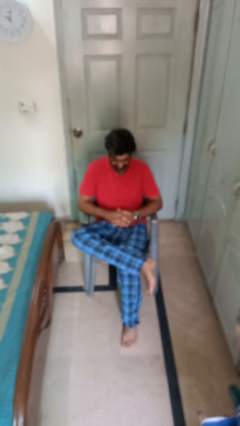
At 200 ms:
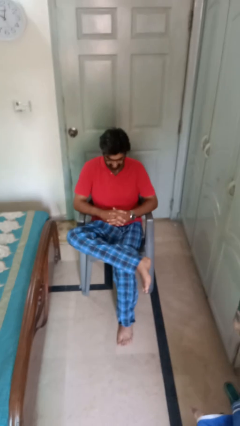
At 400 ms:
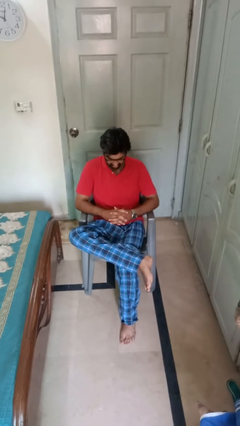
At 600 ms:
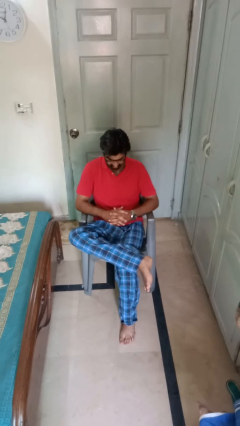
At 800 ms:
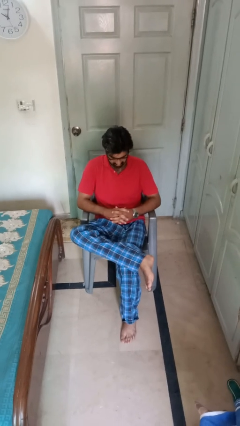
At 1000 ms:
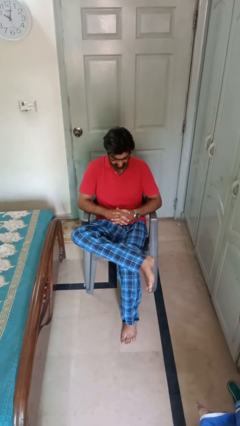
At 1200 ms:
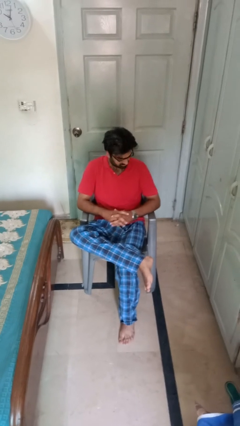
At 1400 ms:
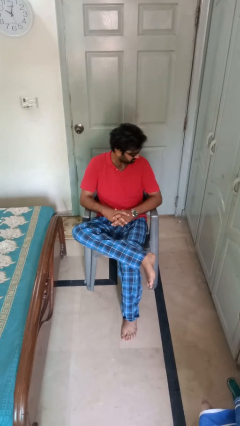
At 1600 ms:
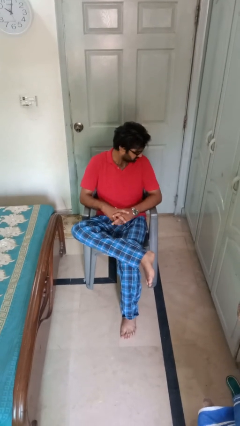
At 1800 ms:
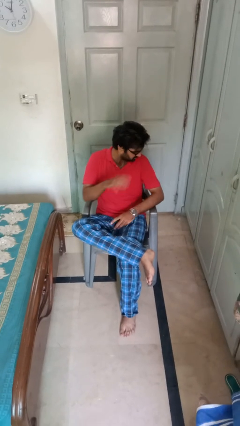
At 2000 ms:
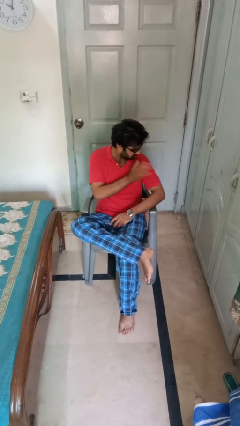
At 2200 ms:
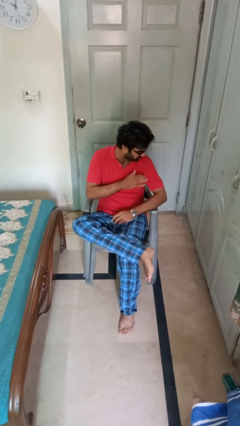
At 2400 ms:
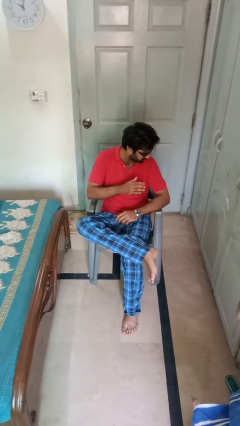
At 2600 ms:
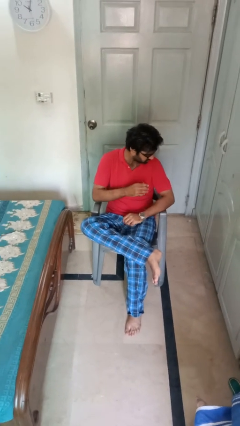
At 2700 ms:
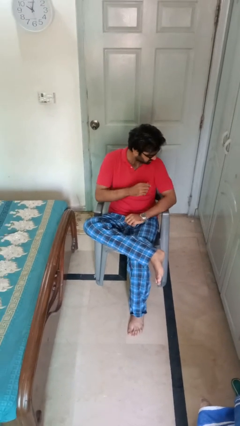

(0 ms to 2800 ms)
person swats bug

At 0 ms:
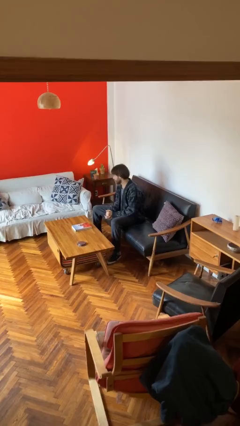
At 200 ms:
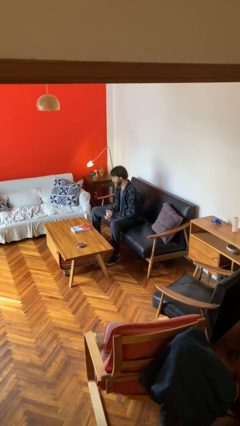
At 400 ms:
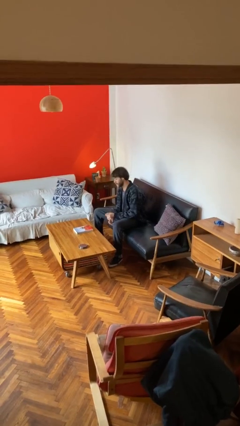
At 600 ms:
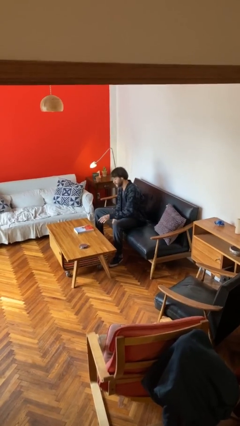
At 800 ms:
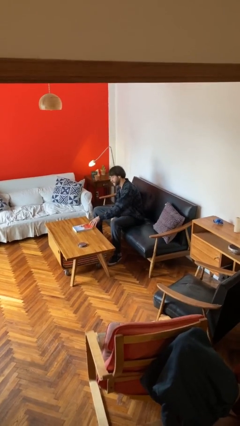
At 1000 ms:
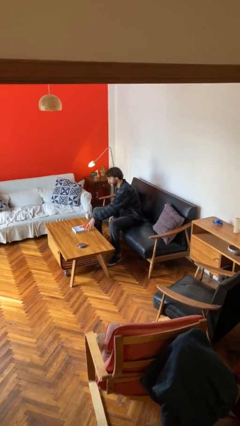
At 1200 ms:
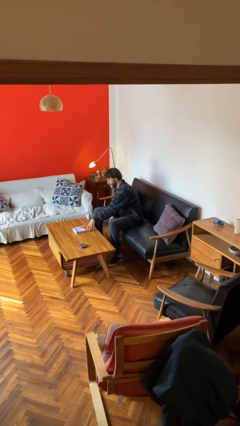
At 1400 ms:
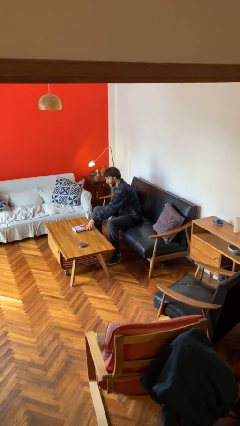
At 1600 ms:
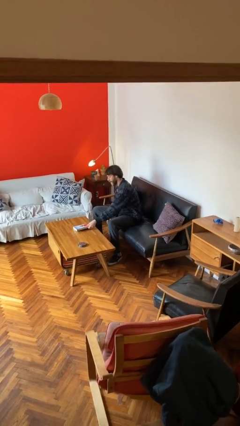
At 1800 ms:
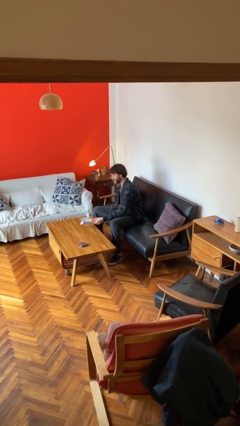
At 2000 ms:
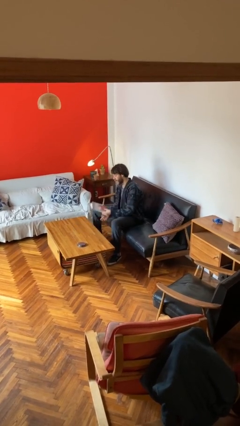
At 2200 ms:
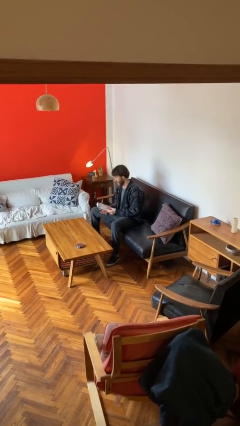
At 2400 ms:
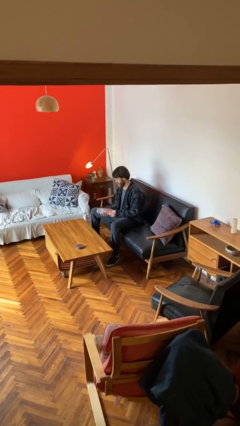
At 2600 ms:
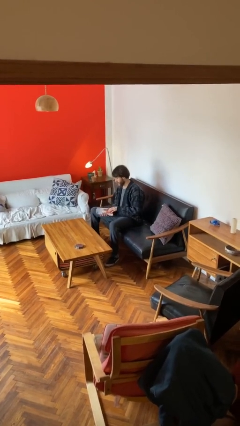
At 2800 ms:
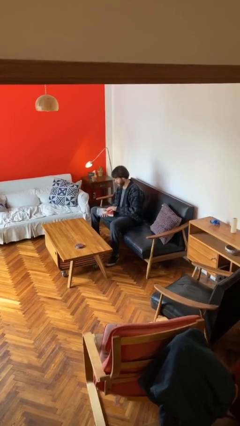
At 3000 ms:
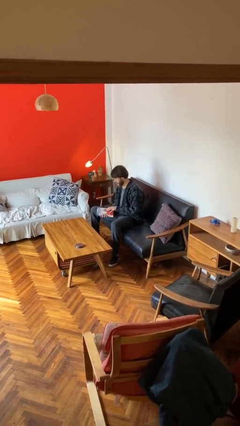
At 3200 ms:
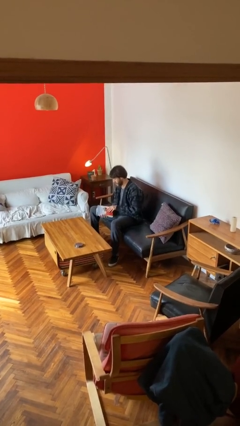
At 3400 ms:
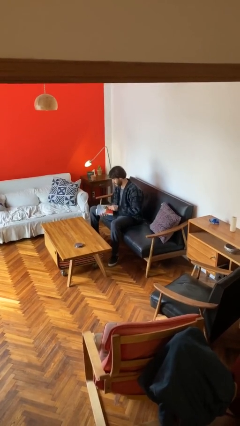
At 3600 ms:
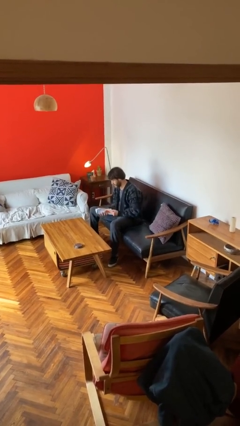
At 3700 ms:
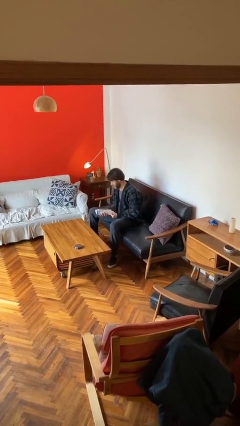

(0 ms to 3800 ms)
person picks up object from table

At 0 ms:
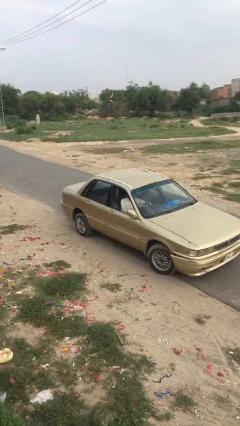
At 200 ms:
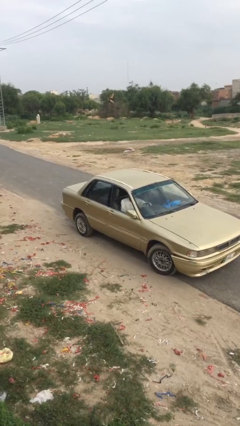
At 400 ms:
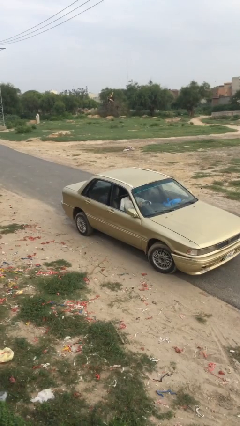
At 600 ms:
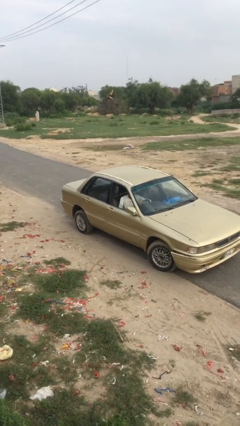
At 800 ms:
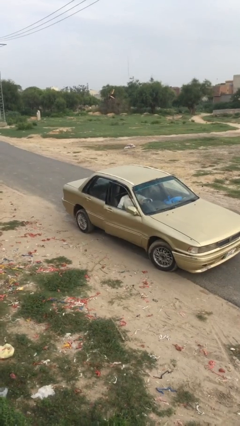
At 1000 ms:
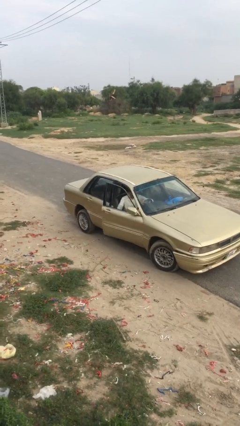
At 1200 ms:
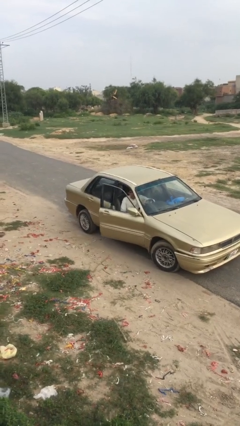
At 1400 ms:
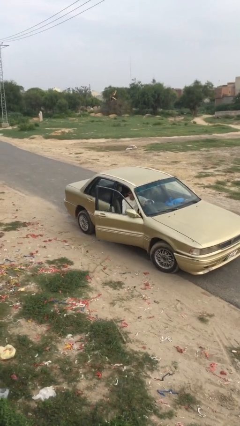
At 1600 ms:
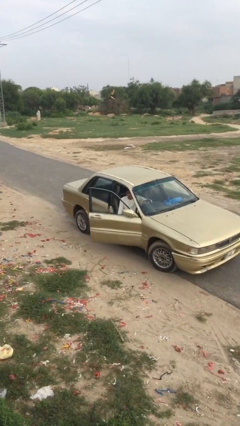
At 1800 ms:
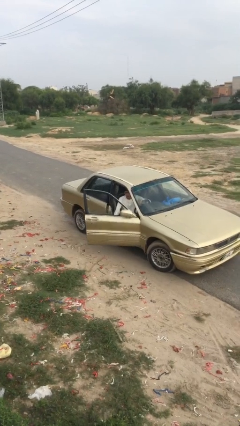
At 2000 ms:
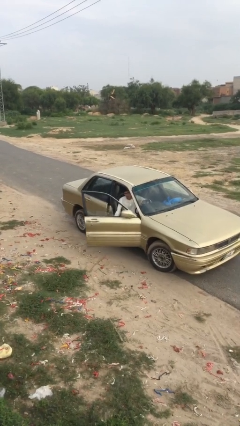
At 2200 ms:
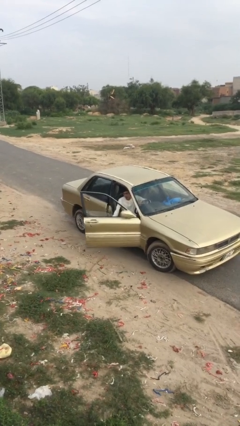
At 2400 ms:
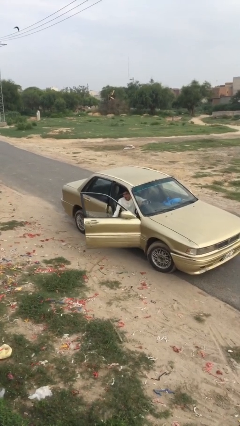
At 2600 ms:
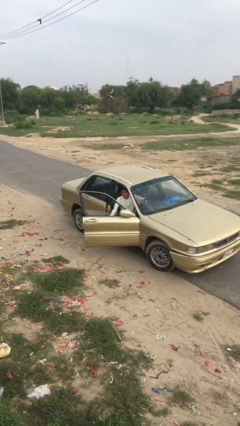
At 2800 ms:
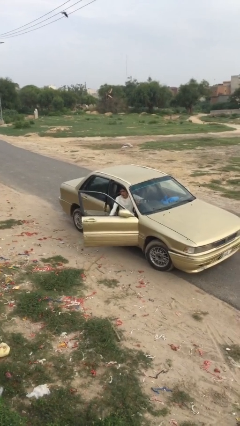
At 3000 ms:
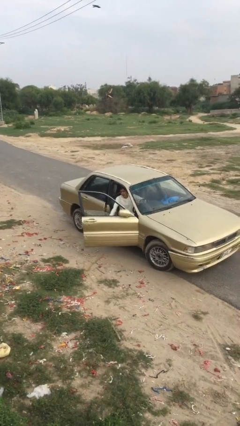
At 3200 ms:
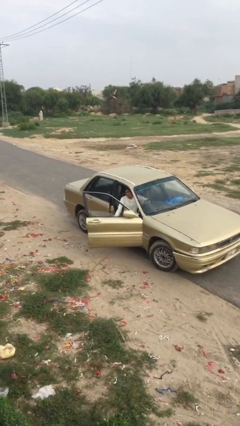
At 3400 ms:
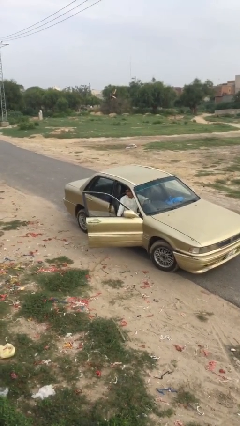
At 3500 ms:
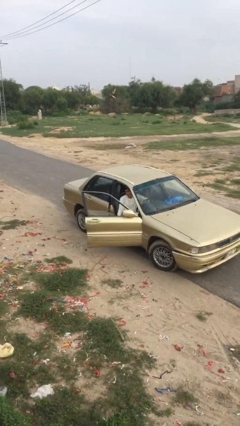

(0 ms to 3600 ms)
person opens car door

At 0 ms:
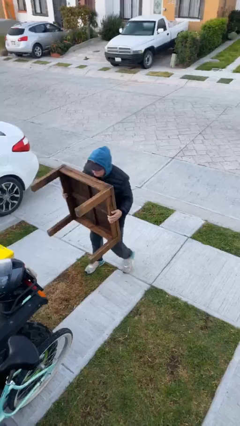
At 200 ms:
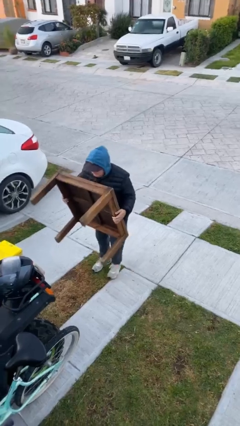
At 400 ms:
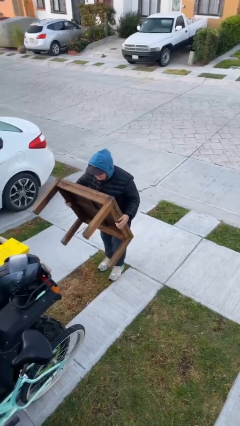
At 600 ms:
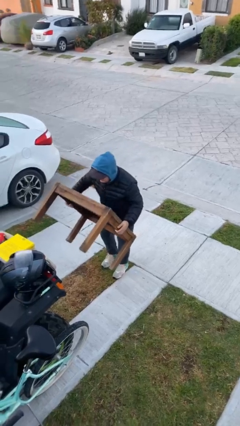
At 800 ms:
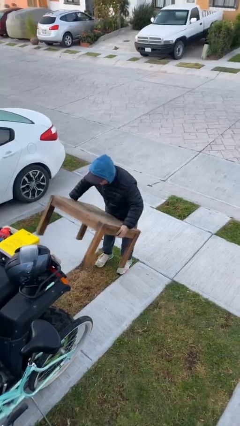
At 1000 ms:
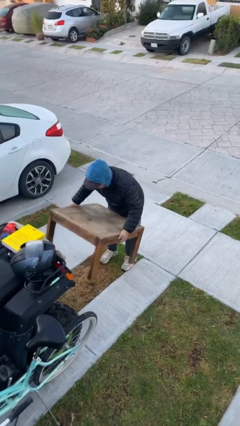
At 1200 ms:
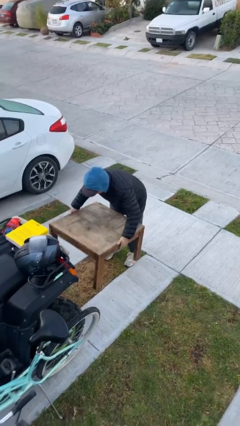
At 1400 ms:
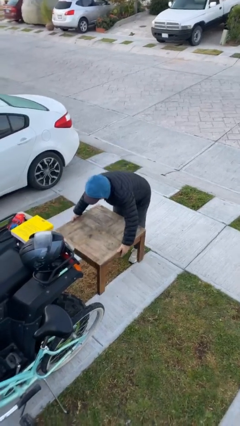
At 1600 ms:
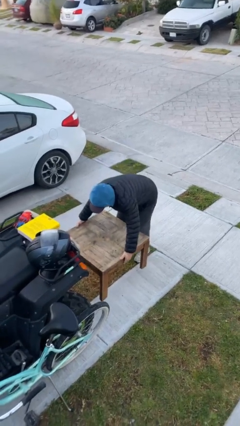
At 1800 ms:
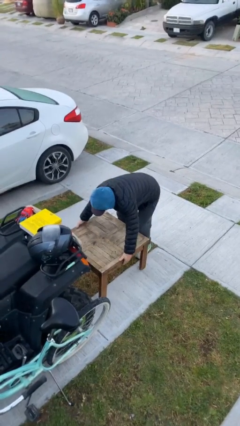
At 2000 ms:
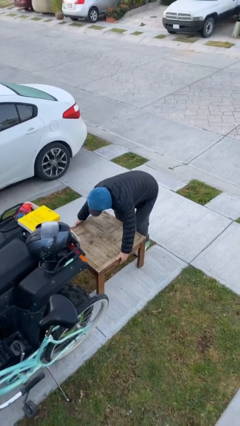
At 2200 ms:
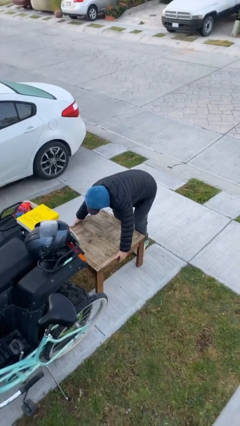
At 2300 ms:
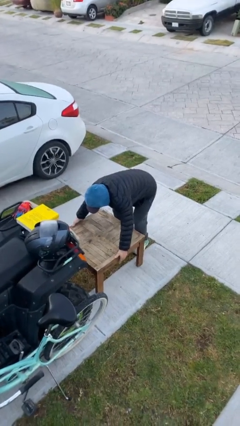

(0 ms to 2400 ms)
person puts down object on floor

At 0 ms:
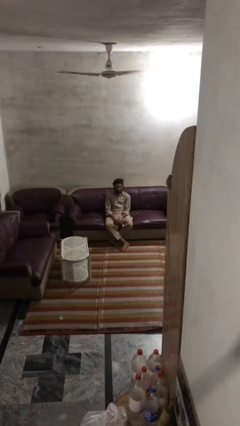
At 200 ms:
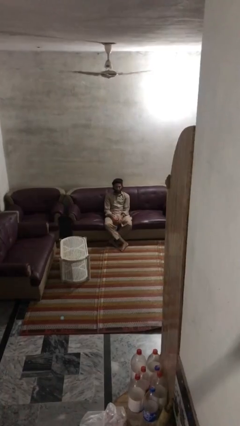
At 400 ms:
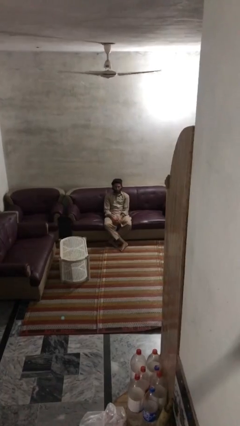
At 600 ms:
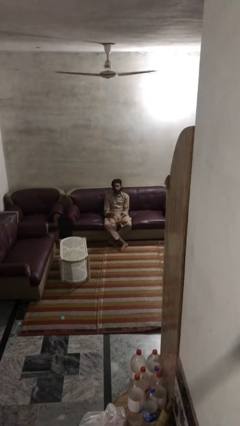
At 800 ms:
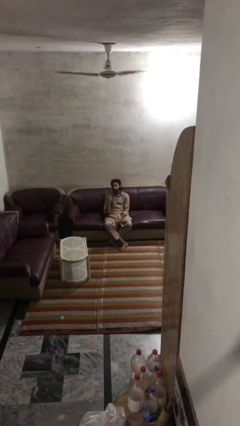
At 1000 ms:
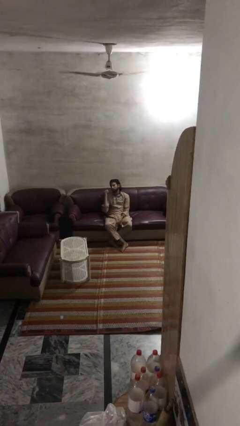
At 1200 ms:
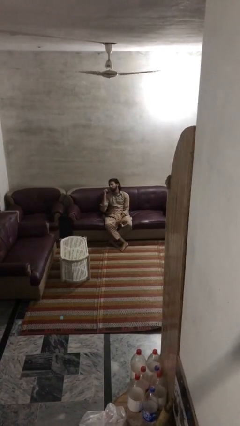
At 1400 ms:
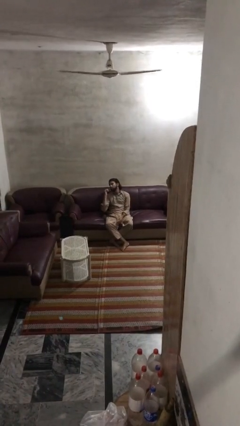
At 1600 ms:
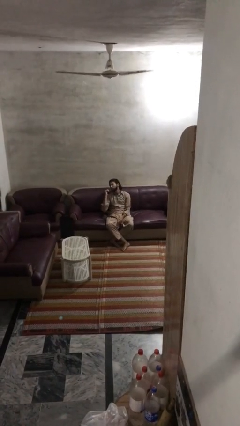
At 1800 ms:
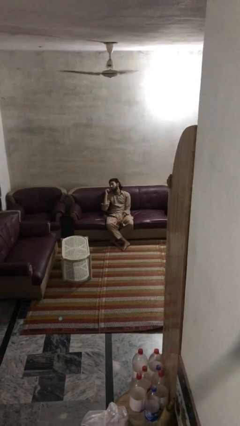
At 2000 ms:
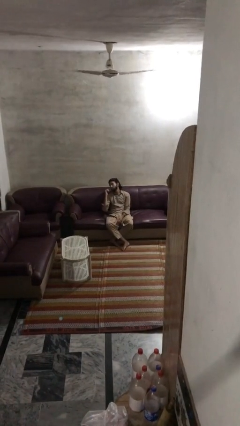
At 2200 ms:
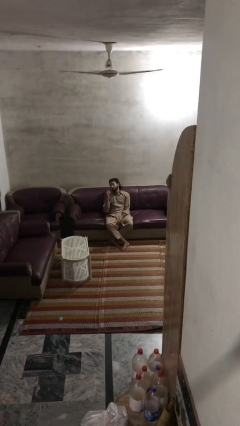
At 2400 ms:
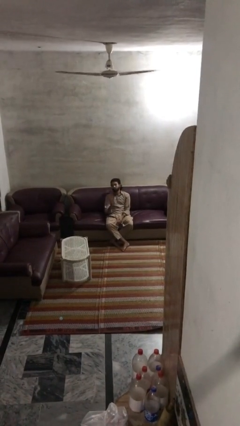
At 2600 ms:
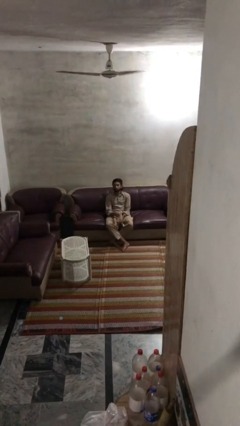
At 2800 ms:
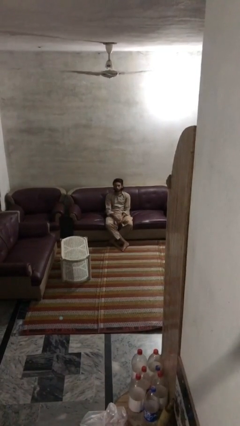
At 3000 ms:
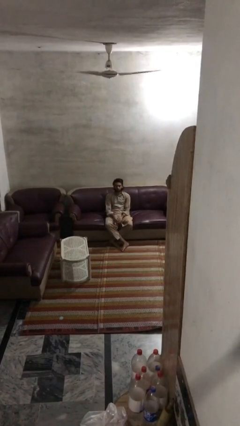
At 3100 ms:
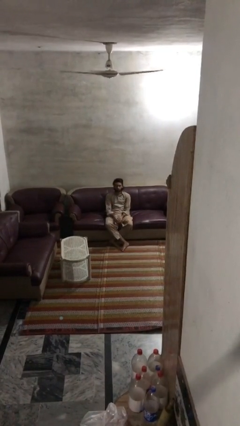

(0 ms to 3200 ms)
person gestures behind me

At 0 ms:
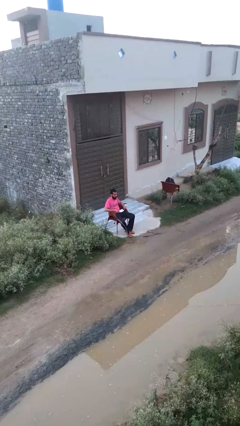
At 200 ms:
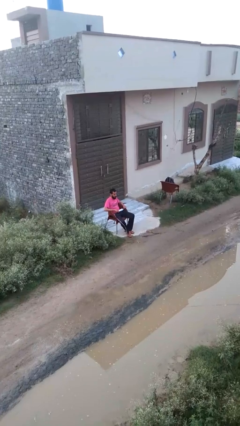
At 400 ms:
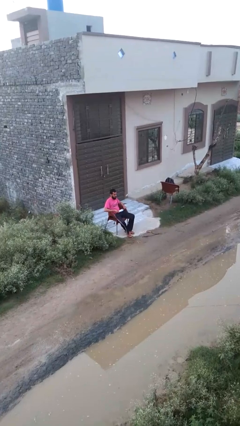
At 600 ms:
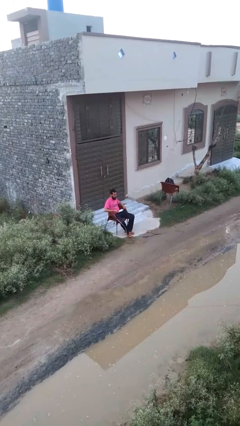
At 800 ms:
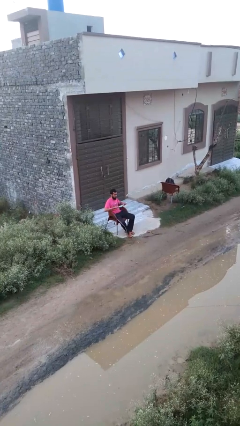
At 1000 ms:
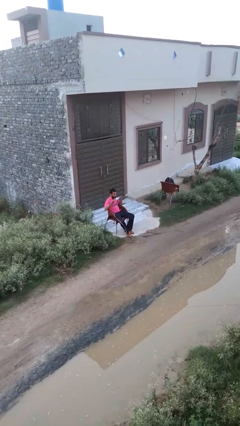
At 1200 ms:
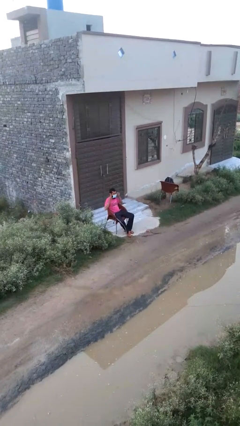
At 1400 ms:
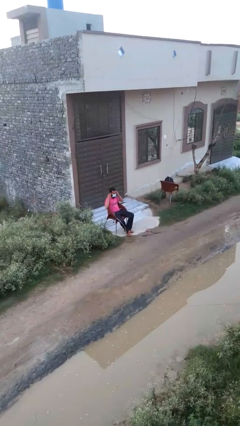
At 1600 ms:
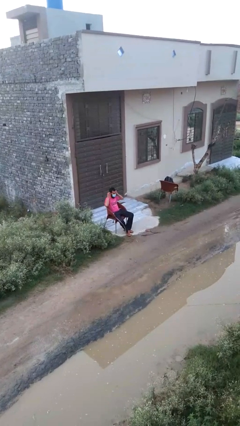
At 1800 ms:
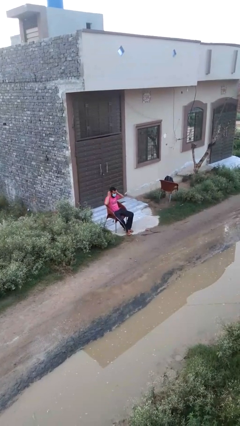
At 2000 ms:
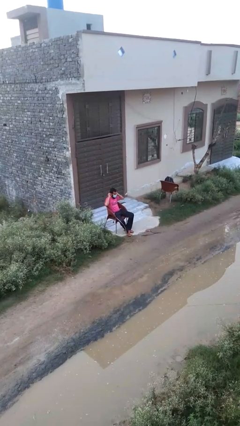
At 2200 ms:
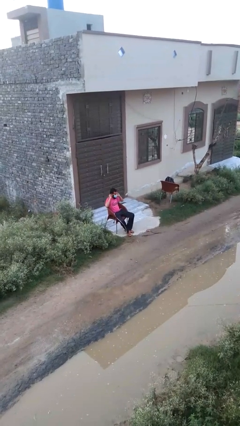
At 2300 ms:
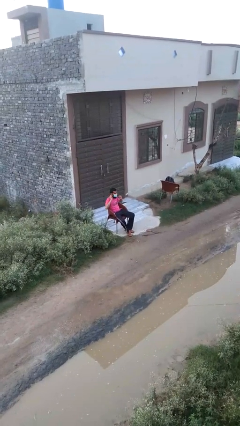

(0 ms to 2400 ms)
person puts on facemask
